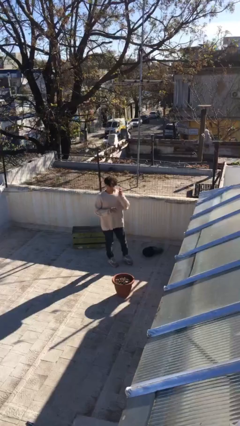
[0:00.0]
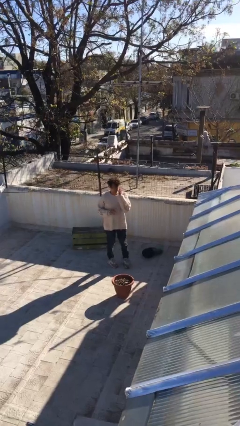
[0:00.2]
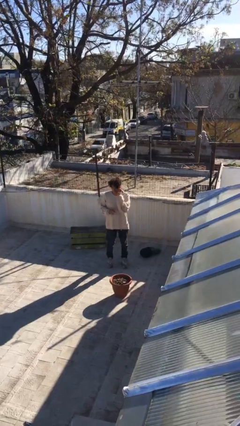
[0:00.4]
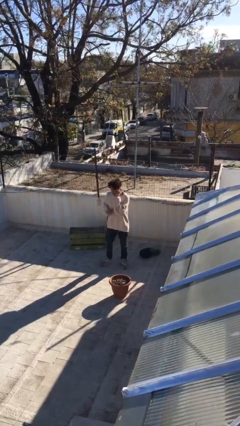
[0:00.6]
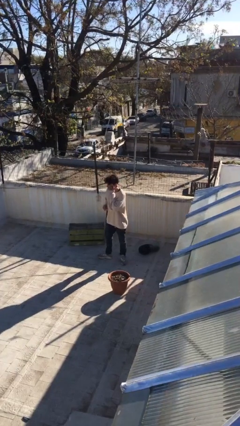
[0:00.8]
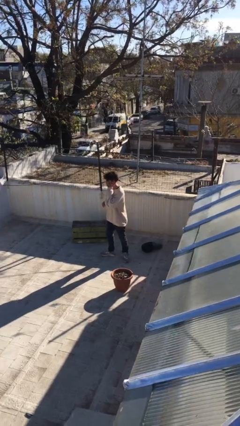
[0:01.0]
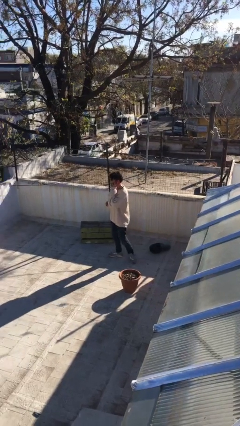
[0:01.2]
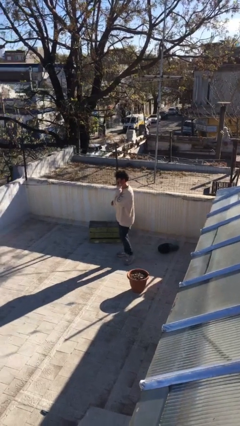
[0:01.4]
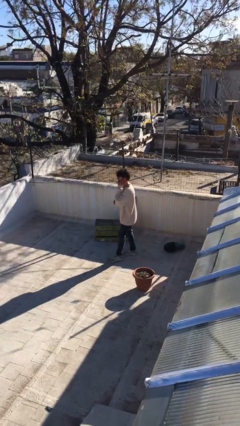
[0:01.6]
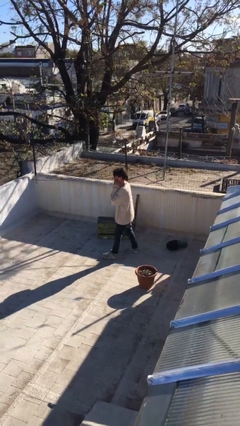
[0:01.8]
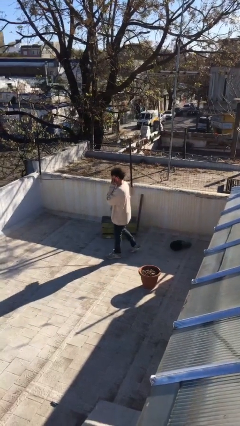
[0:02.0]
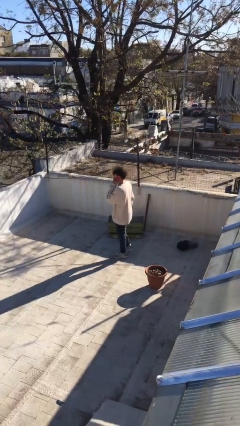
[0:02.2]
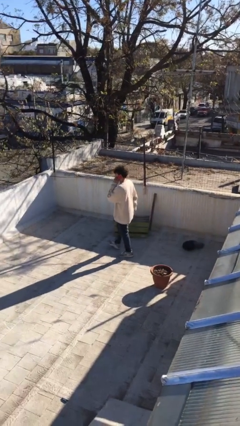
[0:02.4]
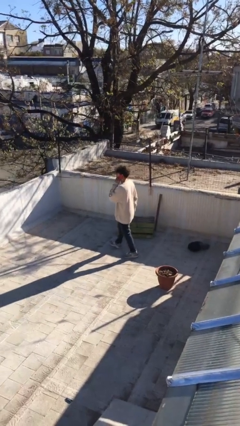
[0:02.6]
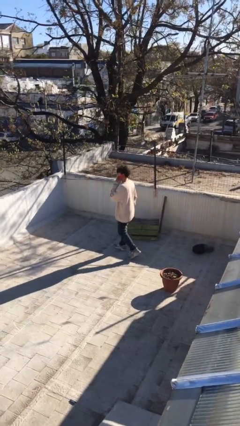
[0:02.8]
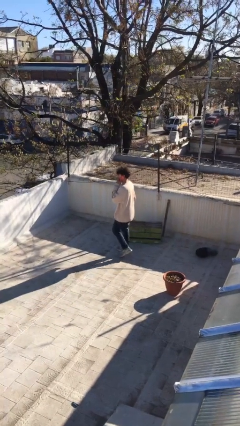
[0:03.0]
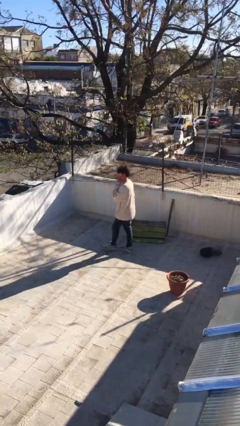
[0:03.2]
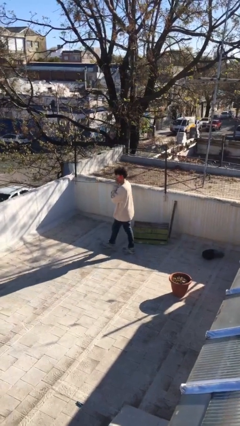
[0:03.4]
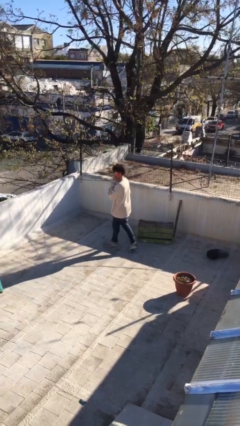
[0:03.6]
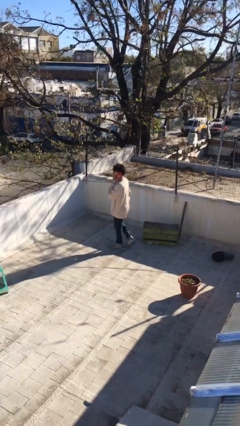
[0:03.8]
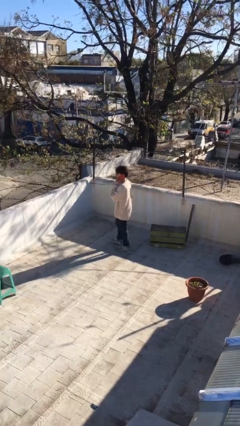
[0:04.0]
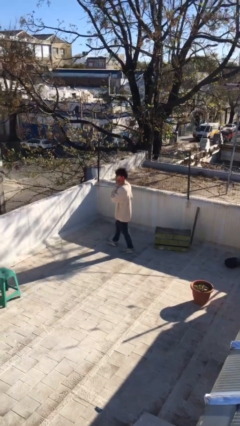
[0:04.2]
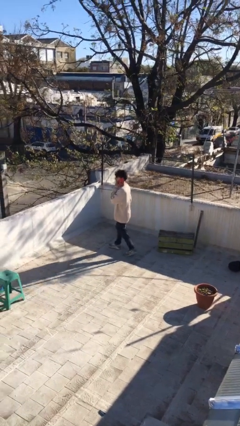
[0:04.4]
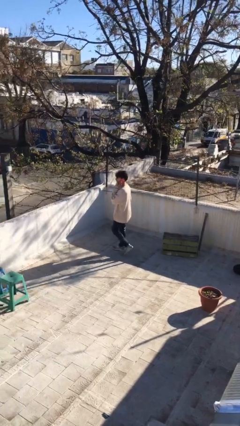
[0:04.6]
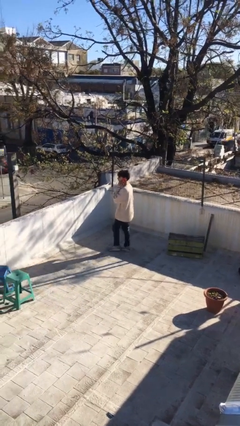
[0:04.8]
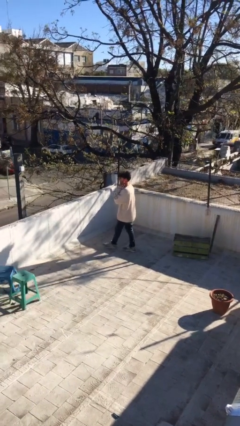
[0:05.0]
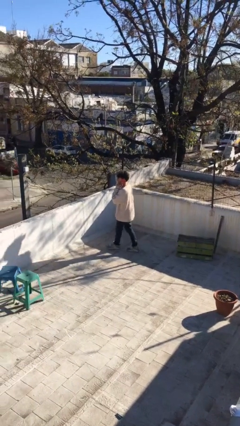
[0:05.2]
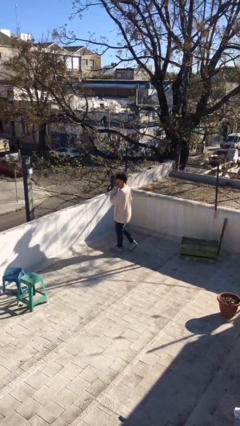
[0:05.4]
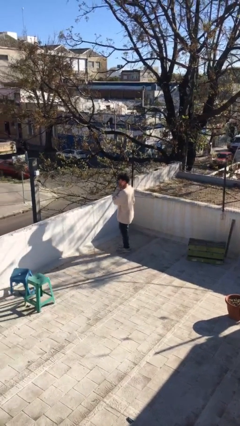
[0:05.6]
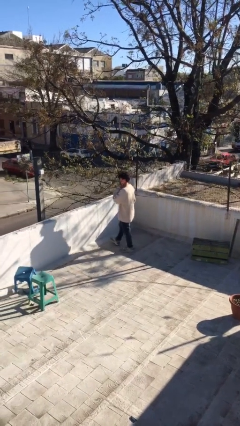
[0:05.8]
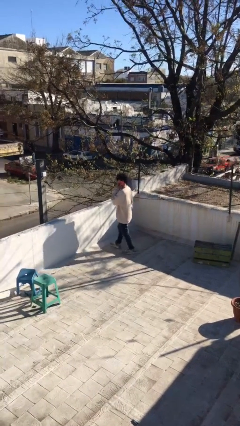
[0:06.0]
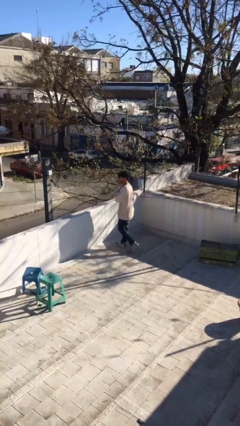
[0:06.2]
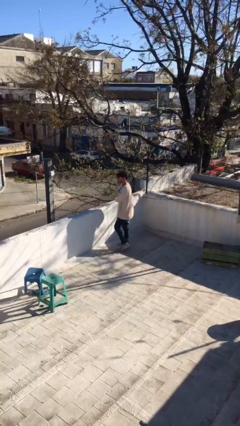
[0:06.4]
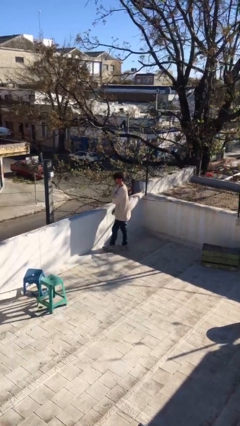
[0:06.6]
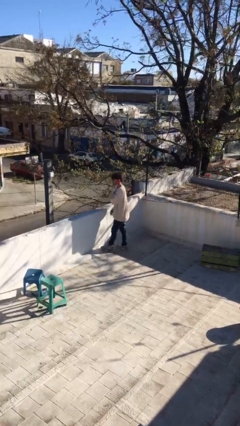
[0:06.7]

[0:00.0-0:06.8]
person talks on phone

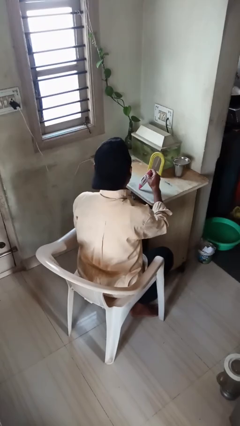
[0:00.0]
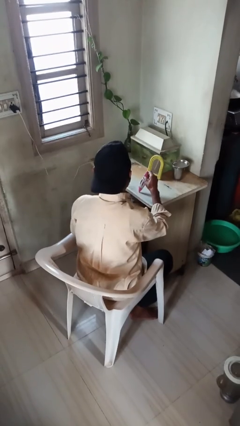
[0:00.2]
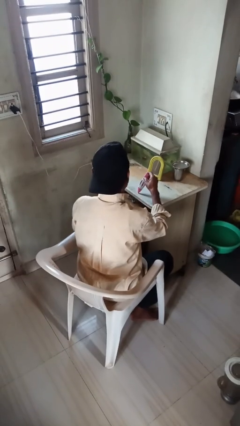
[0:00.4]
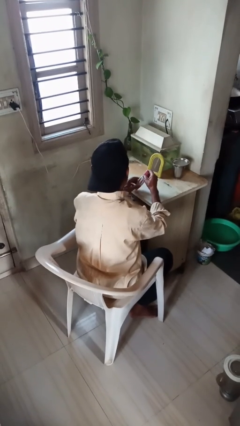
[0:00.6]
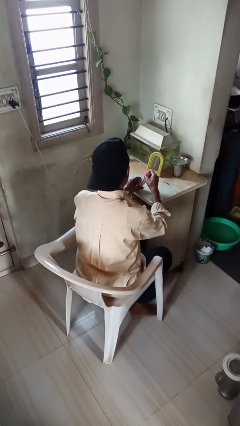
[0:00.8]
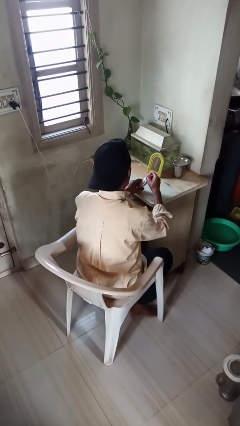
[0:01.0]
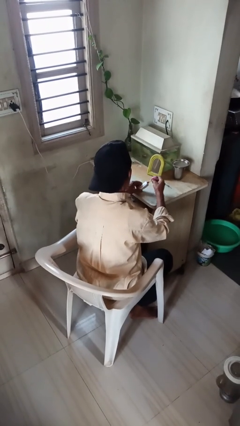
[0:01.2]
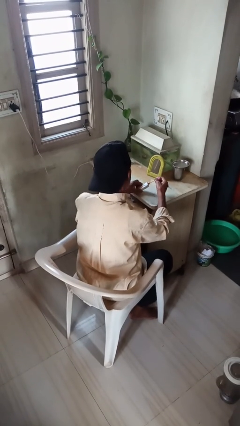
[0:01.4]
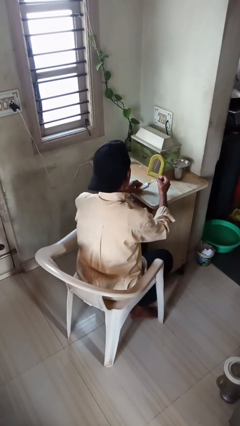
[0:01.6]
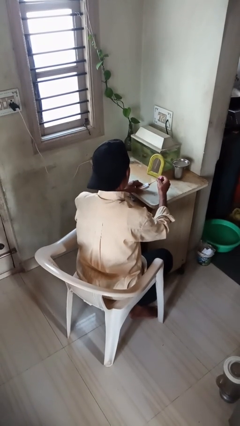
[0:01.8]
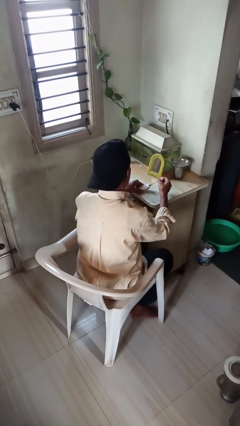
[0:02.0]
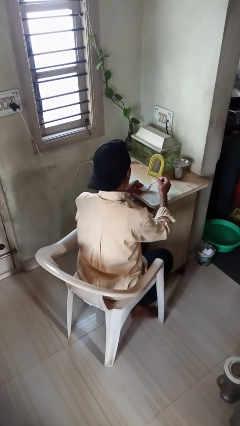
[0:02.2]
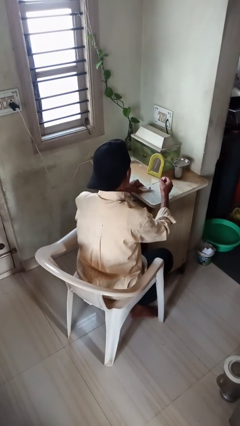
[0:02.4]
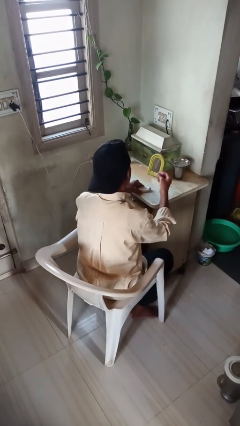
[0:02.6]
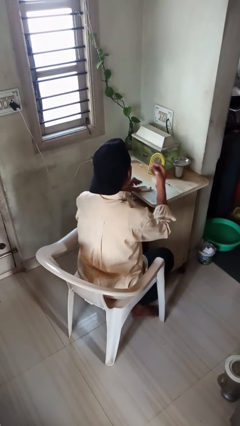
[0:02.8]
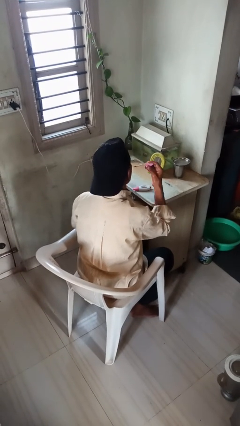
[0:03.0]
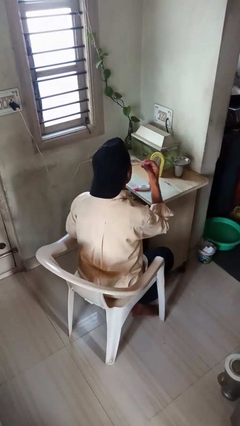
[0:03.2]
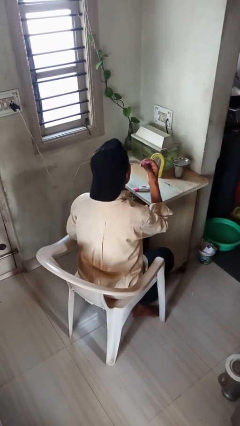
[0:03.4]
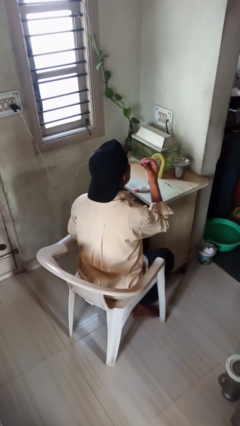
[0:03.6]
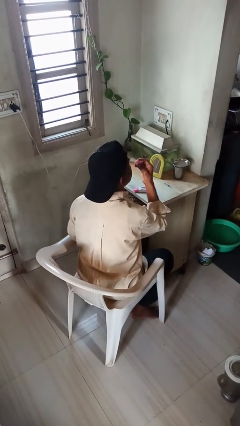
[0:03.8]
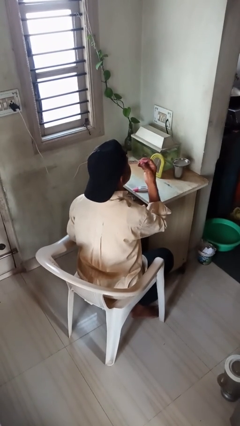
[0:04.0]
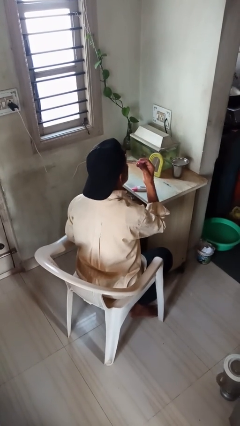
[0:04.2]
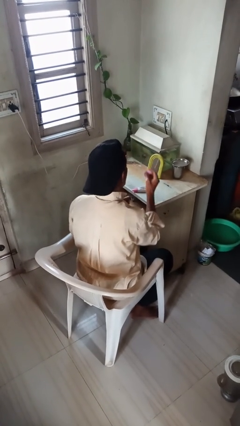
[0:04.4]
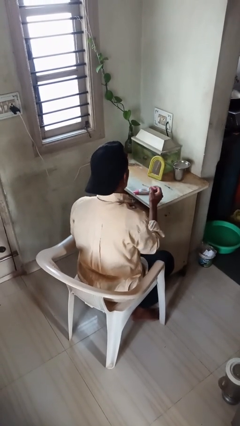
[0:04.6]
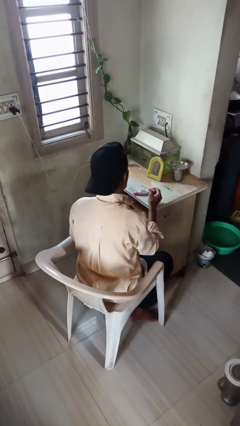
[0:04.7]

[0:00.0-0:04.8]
person applies lip makeup

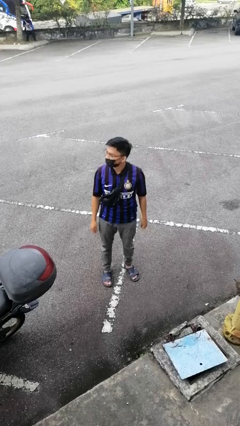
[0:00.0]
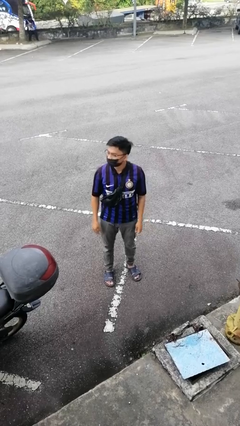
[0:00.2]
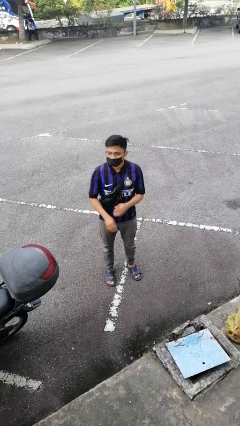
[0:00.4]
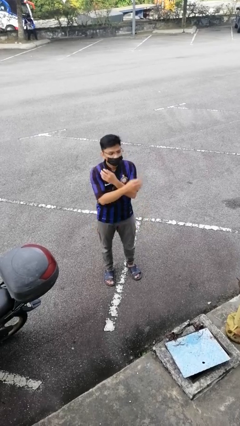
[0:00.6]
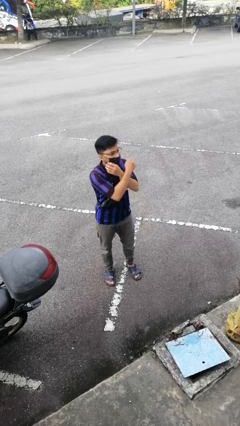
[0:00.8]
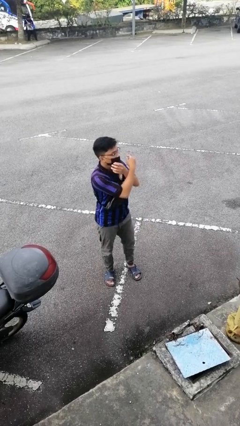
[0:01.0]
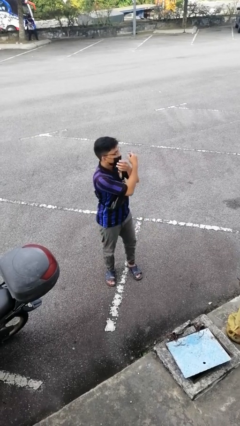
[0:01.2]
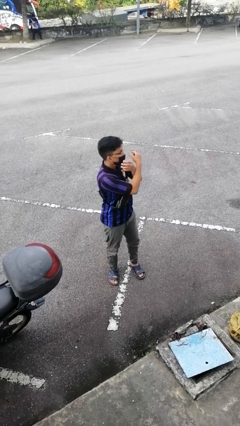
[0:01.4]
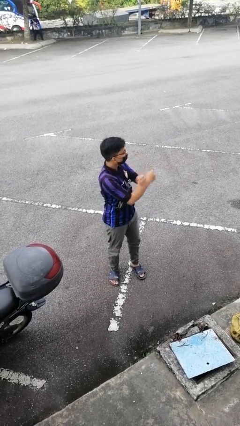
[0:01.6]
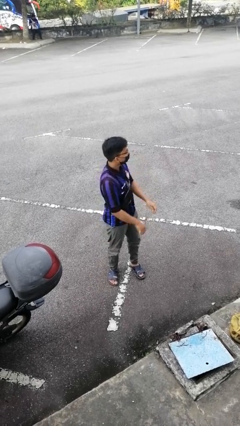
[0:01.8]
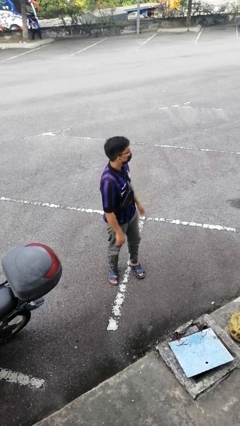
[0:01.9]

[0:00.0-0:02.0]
person gestures arms x

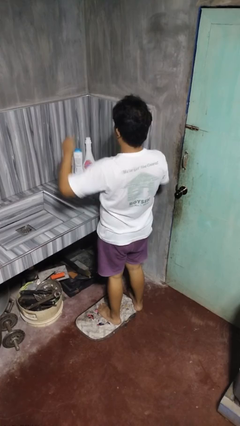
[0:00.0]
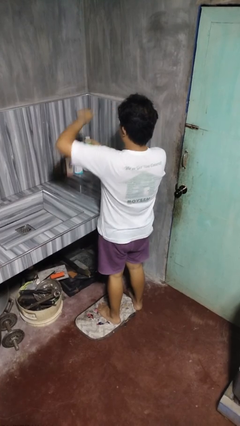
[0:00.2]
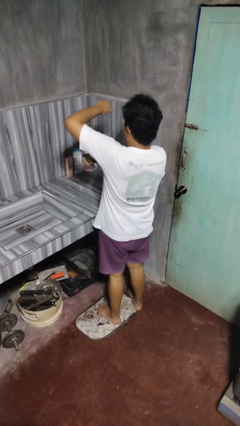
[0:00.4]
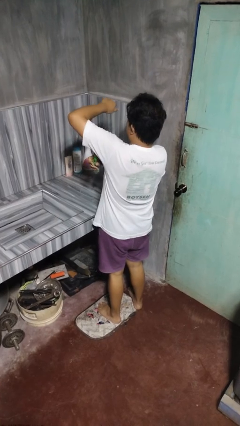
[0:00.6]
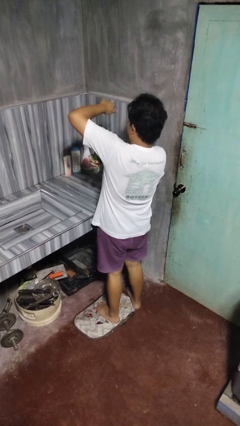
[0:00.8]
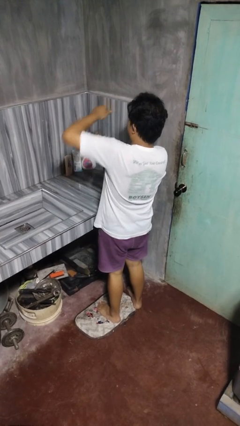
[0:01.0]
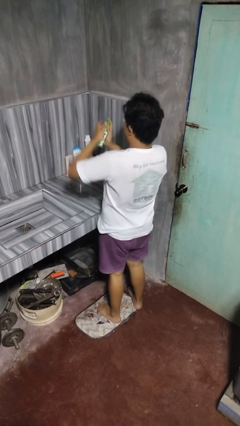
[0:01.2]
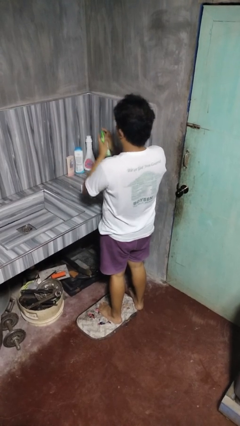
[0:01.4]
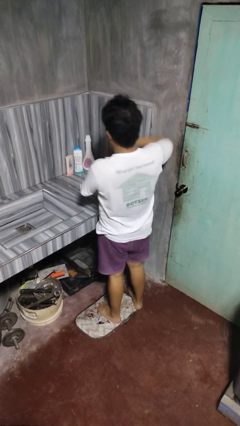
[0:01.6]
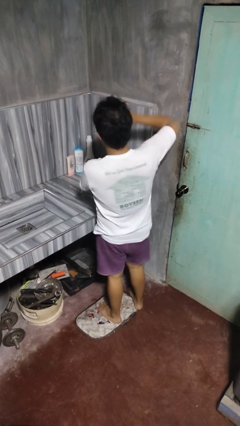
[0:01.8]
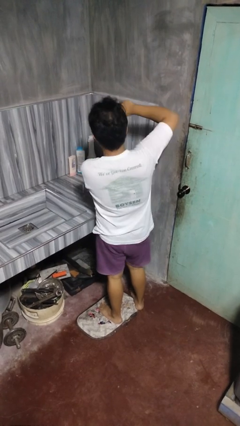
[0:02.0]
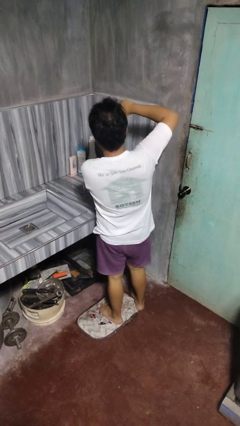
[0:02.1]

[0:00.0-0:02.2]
person applies deodorant

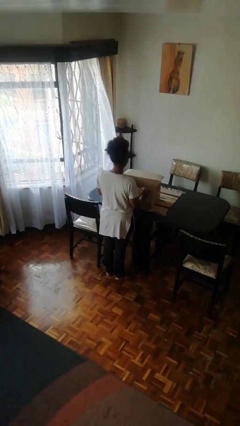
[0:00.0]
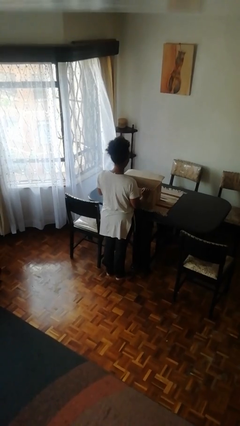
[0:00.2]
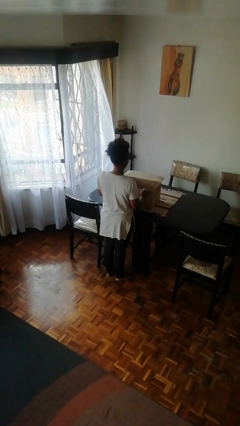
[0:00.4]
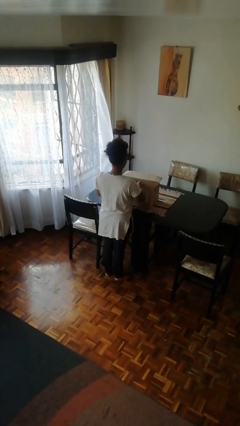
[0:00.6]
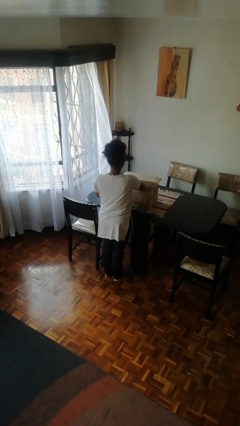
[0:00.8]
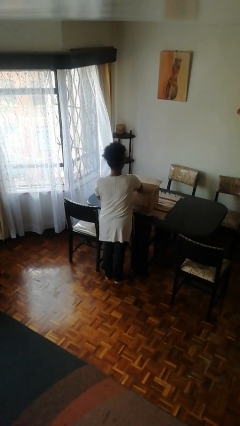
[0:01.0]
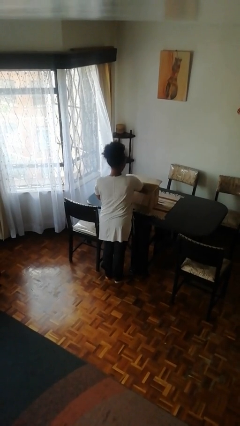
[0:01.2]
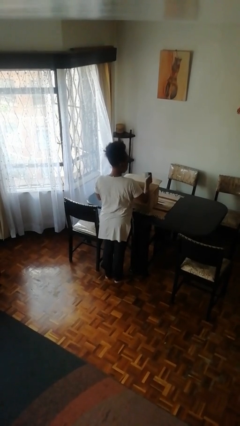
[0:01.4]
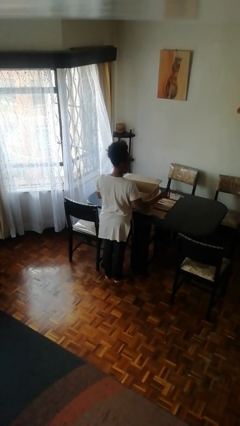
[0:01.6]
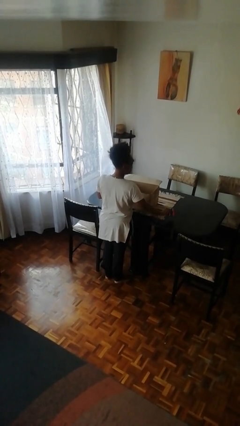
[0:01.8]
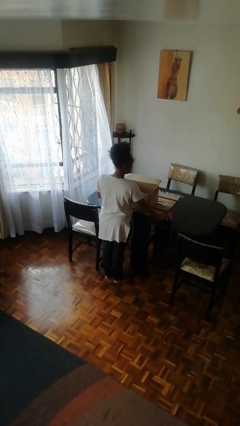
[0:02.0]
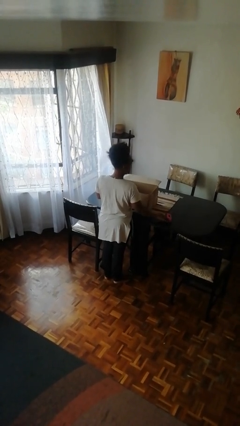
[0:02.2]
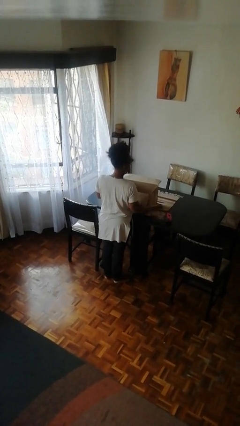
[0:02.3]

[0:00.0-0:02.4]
person takes object from box
